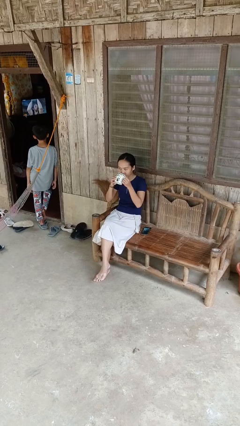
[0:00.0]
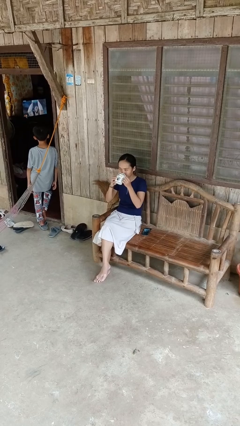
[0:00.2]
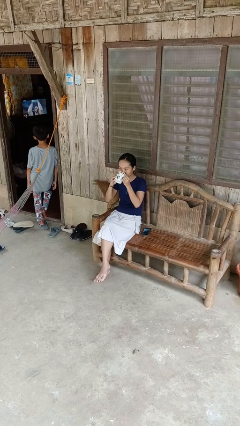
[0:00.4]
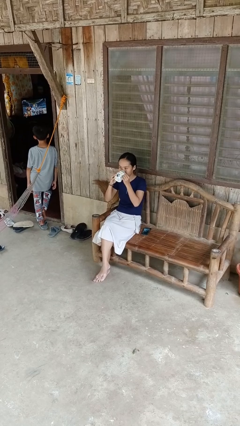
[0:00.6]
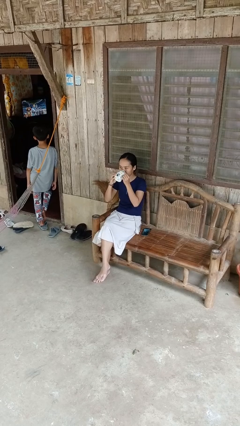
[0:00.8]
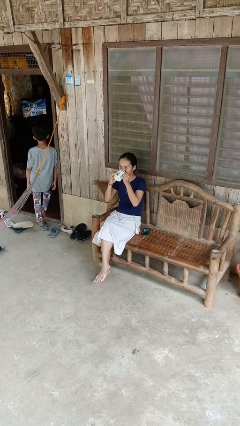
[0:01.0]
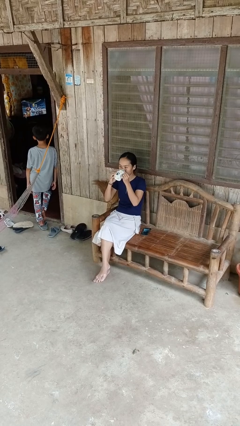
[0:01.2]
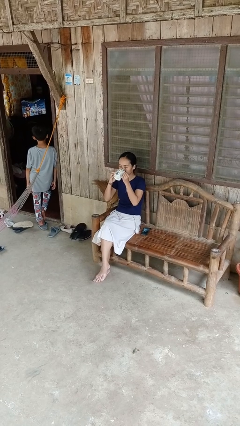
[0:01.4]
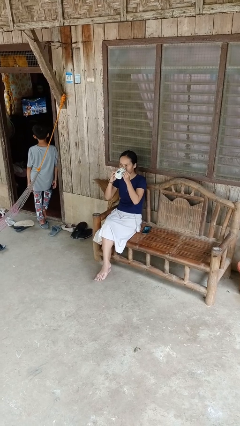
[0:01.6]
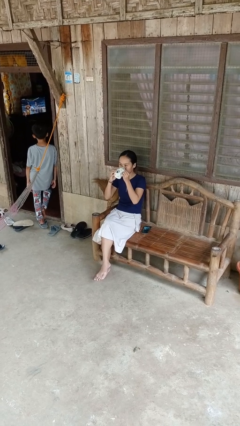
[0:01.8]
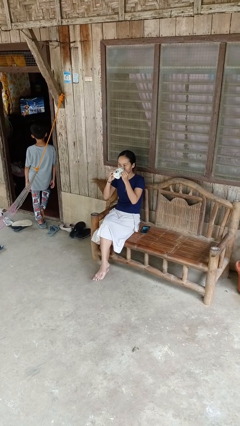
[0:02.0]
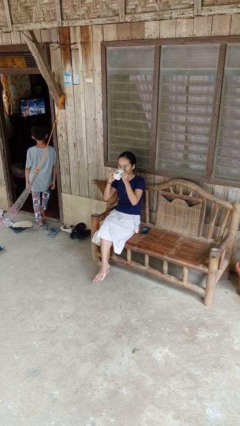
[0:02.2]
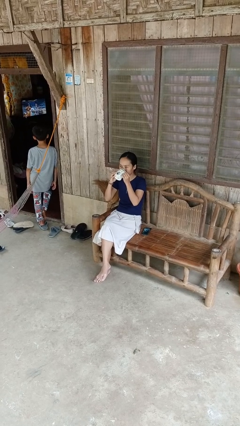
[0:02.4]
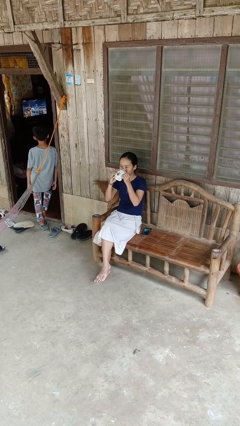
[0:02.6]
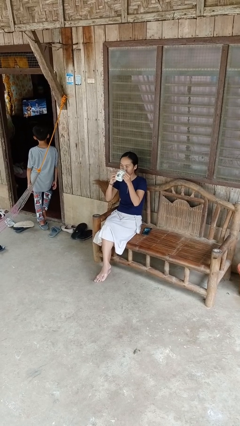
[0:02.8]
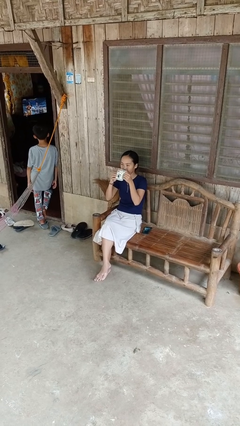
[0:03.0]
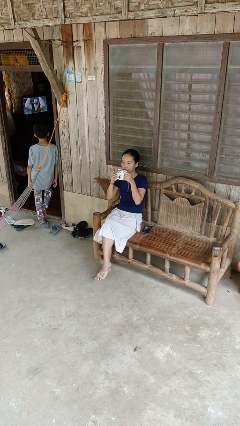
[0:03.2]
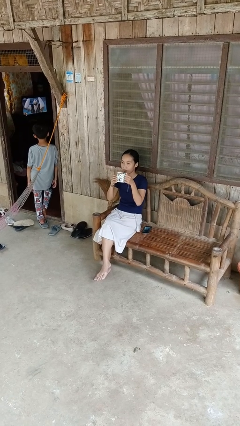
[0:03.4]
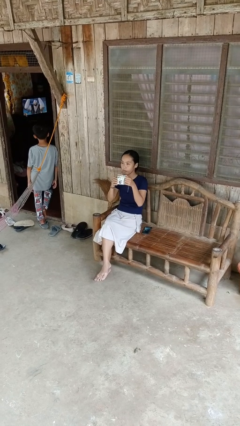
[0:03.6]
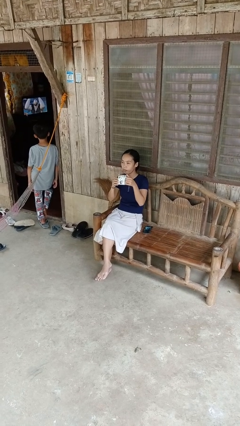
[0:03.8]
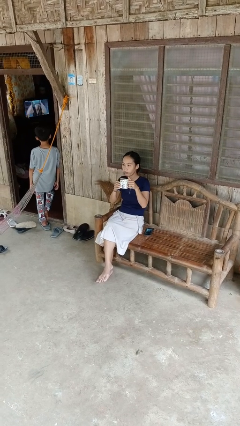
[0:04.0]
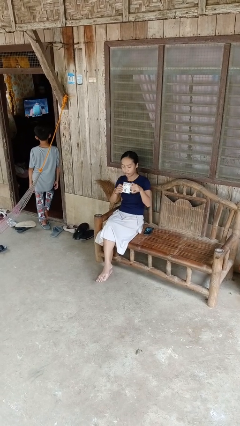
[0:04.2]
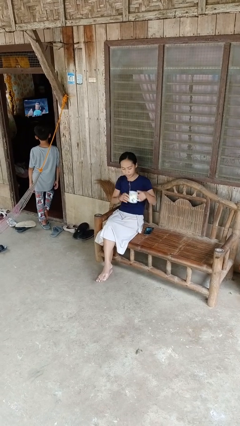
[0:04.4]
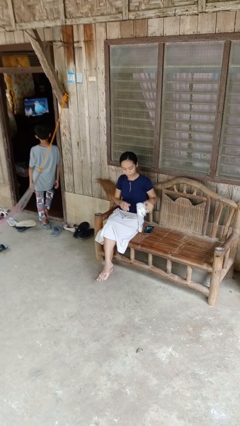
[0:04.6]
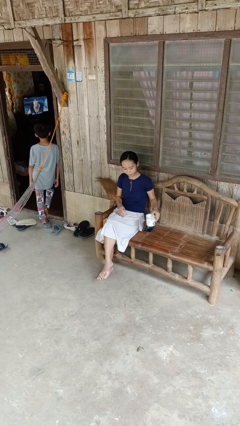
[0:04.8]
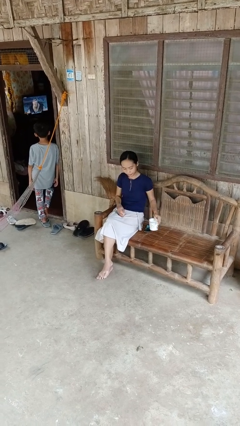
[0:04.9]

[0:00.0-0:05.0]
person drinks from mug

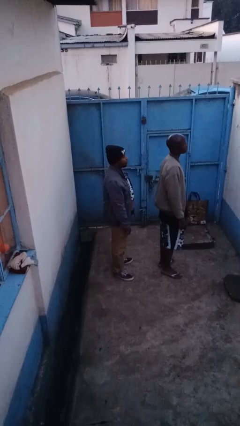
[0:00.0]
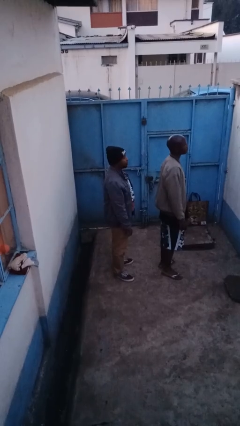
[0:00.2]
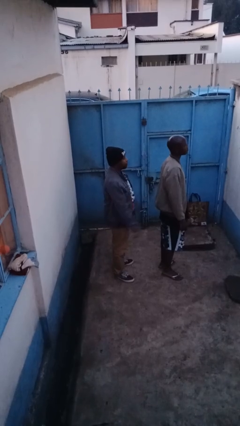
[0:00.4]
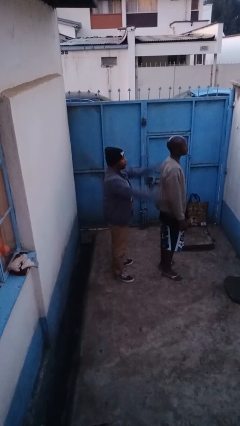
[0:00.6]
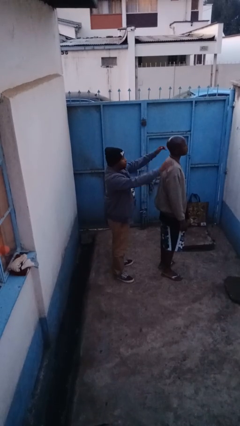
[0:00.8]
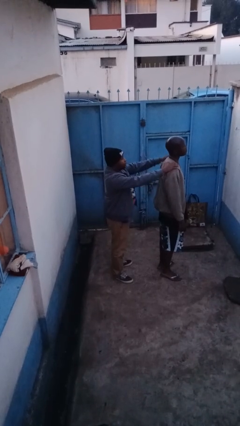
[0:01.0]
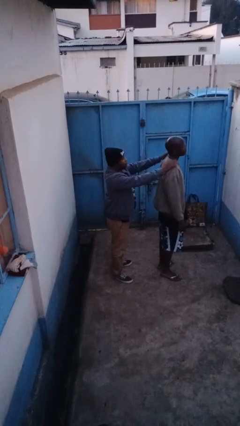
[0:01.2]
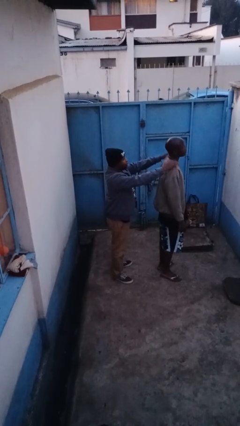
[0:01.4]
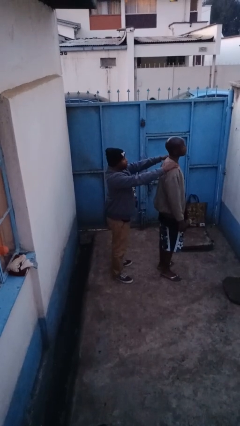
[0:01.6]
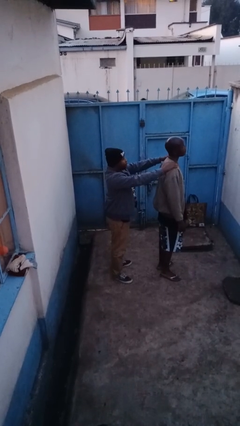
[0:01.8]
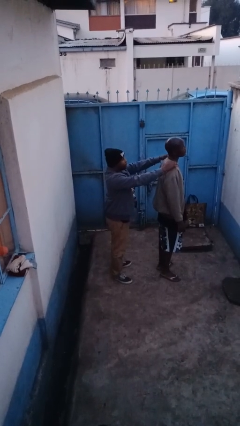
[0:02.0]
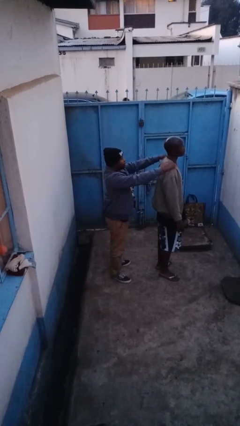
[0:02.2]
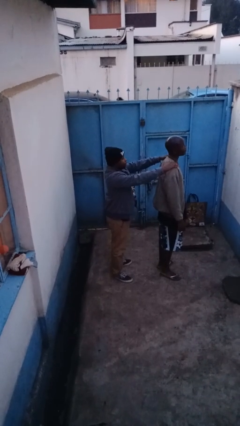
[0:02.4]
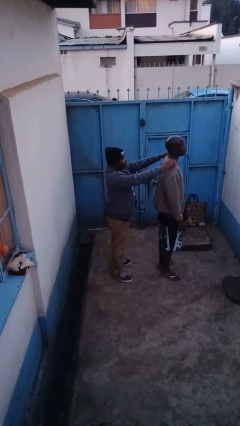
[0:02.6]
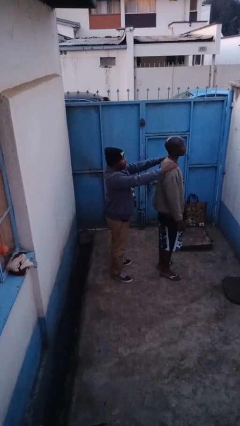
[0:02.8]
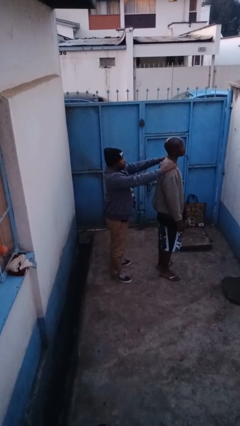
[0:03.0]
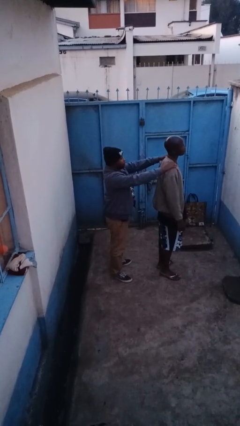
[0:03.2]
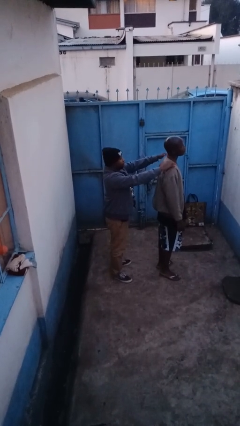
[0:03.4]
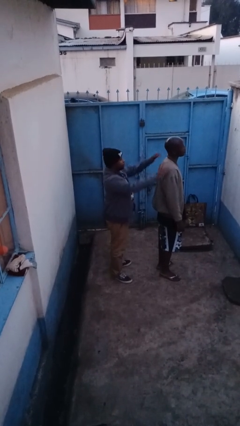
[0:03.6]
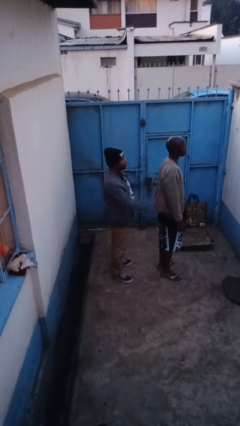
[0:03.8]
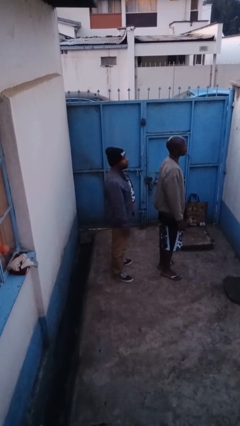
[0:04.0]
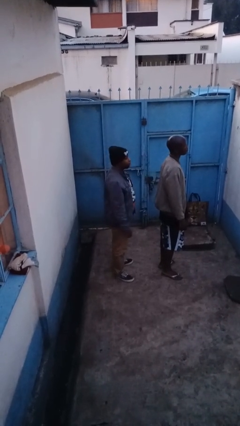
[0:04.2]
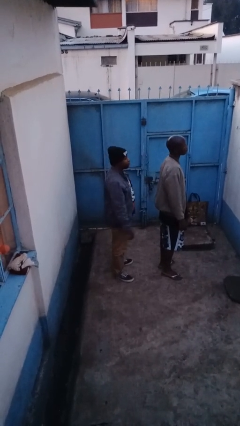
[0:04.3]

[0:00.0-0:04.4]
person pounds shoulders of person

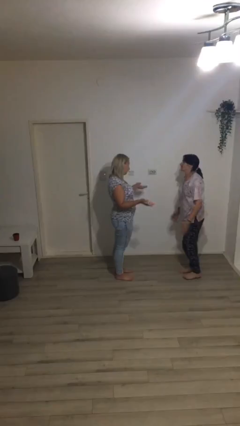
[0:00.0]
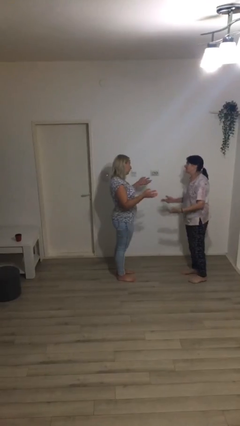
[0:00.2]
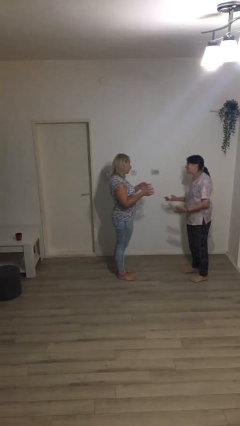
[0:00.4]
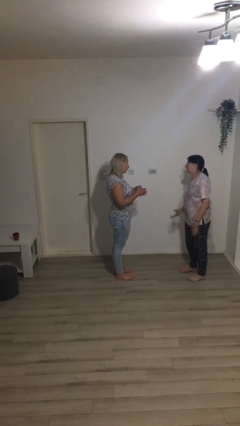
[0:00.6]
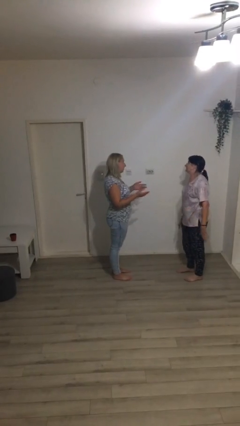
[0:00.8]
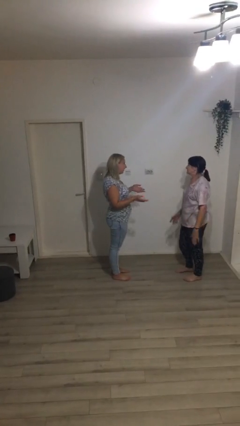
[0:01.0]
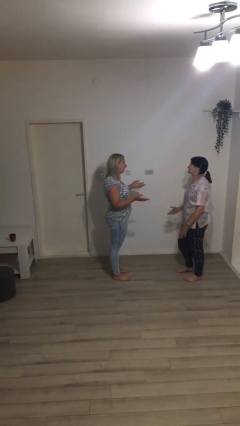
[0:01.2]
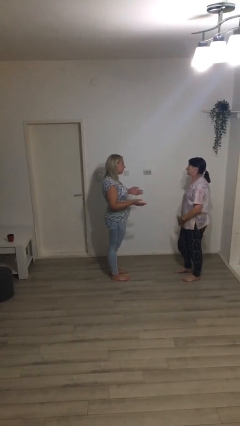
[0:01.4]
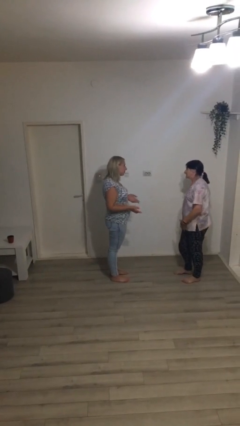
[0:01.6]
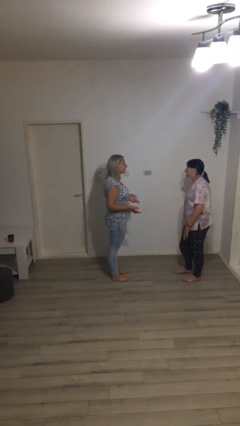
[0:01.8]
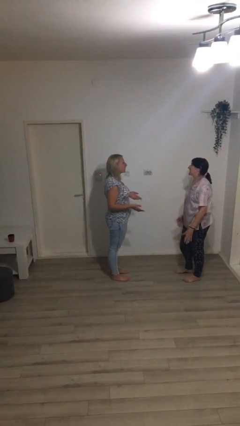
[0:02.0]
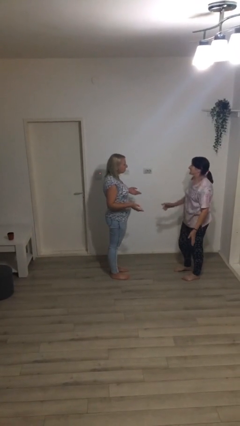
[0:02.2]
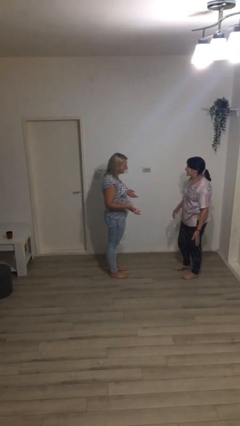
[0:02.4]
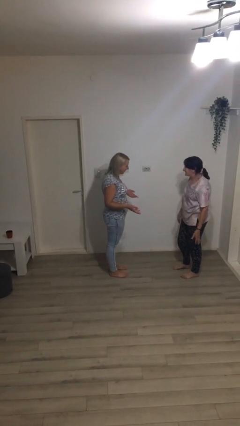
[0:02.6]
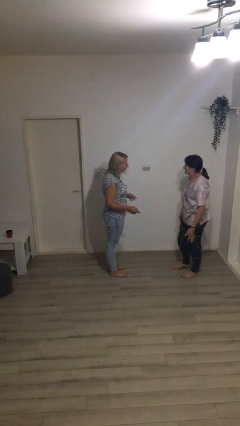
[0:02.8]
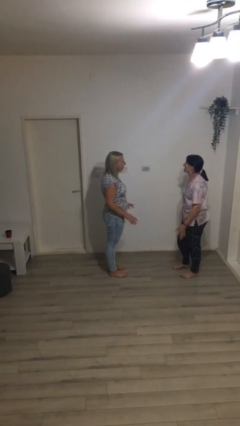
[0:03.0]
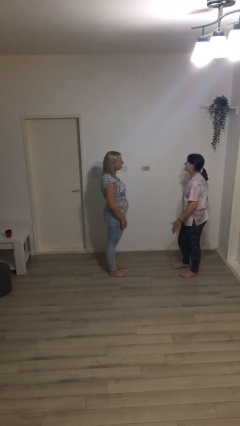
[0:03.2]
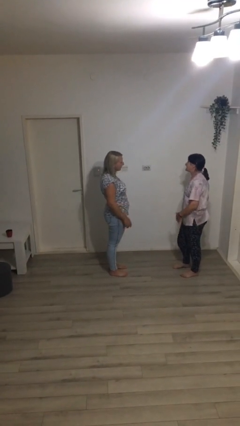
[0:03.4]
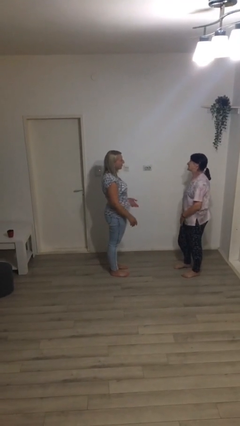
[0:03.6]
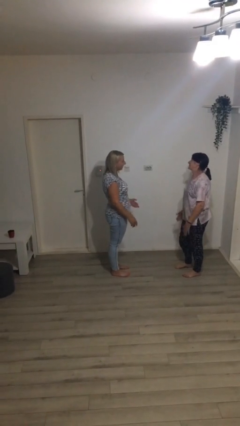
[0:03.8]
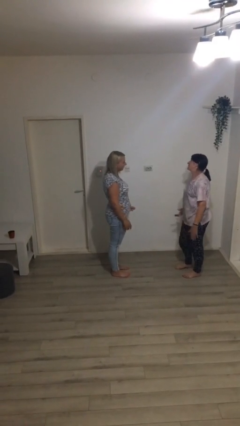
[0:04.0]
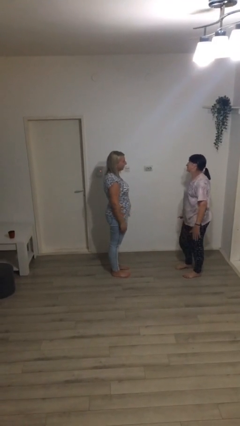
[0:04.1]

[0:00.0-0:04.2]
person talks to person

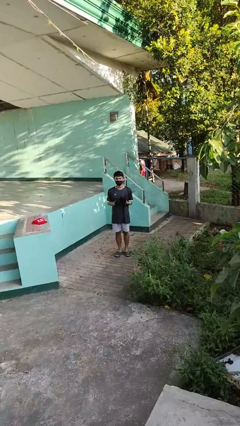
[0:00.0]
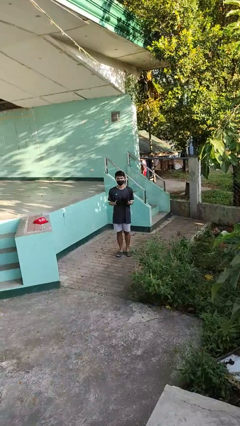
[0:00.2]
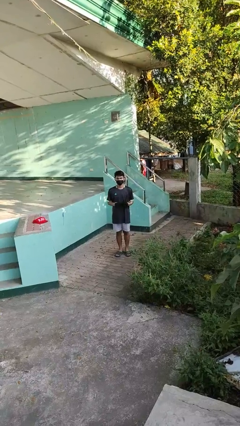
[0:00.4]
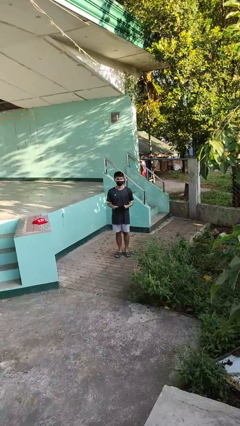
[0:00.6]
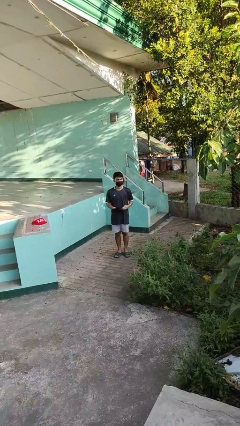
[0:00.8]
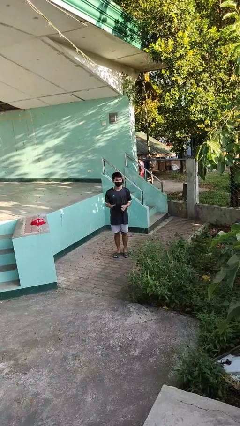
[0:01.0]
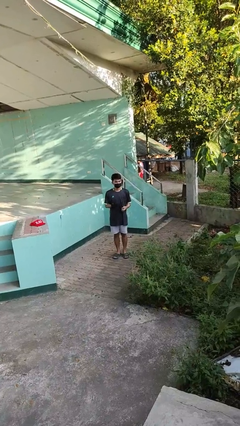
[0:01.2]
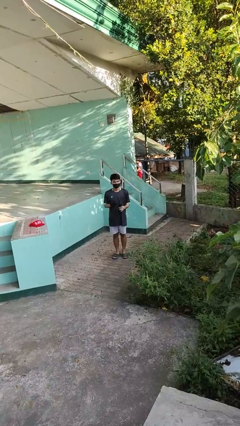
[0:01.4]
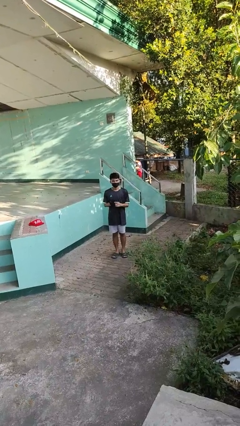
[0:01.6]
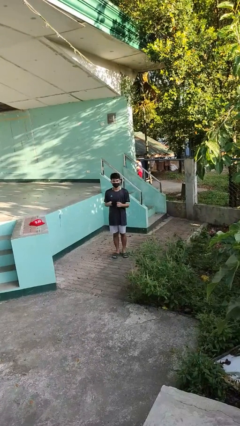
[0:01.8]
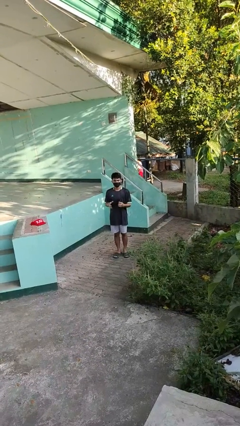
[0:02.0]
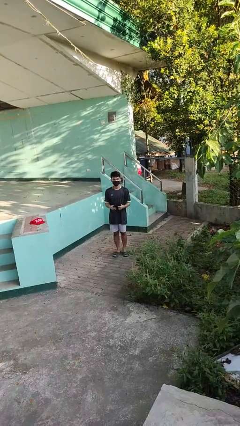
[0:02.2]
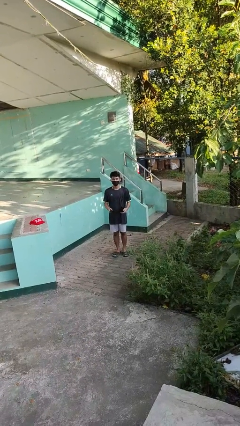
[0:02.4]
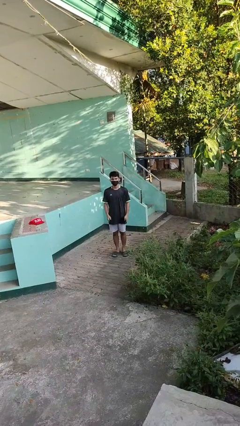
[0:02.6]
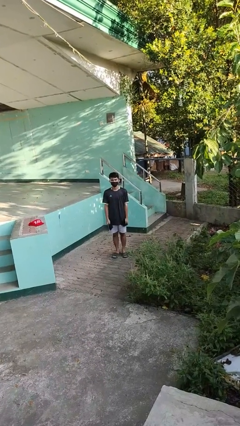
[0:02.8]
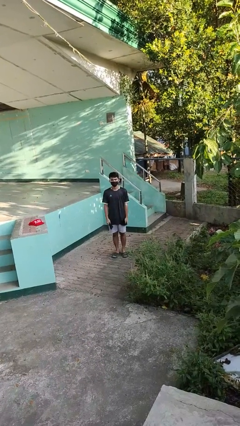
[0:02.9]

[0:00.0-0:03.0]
person takes off gloves

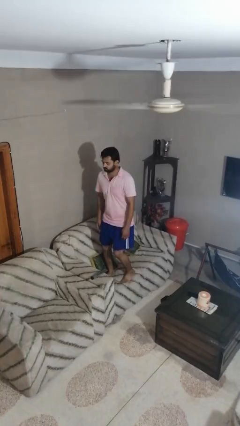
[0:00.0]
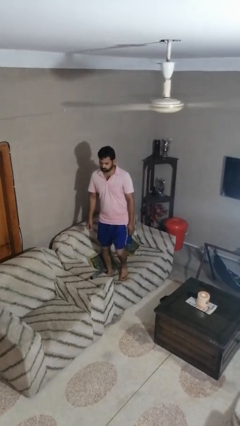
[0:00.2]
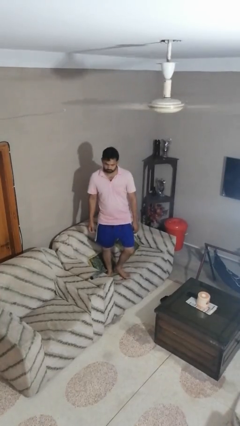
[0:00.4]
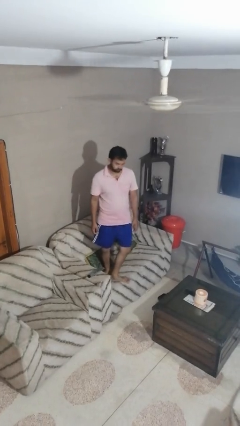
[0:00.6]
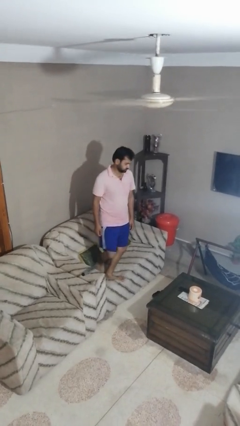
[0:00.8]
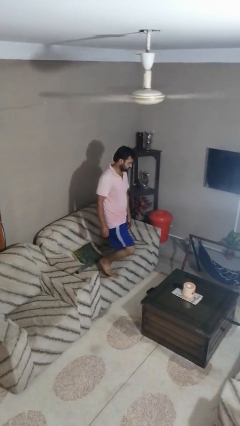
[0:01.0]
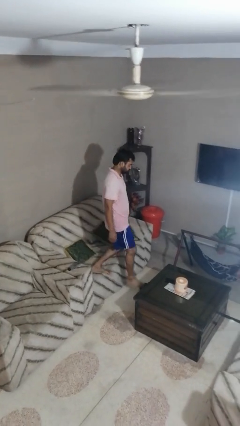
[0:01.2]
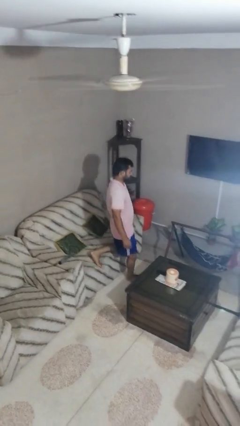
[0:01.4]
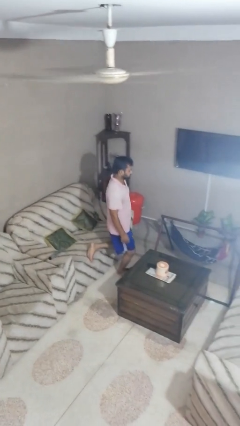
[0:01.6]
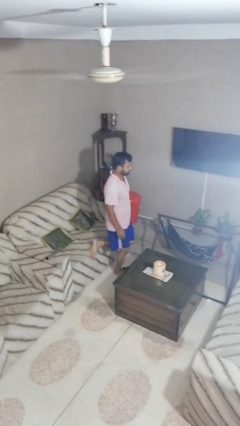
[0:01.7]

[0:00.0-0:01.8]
person climbs off couch
